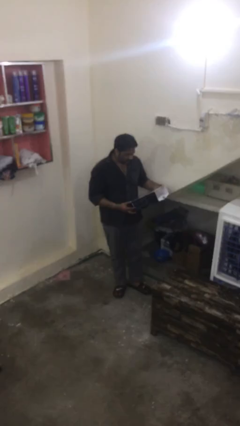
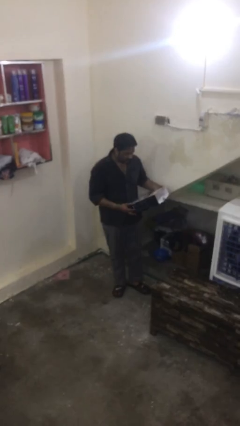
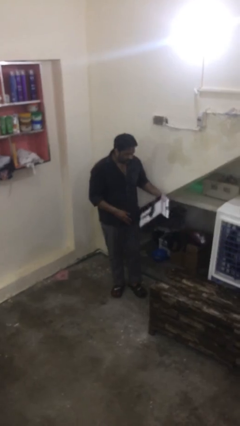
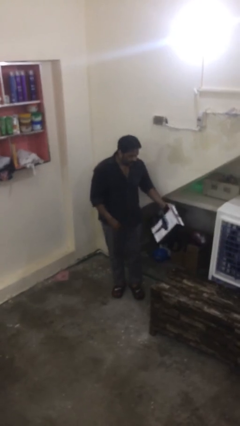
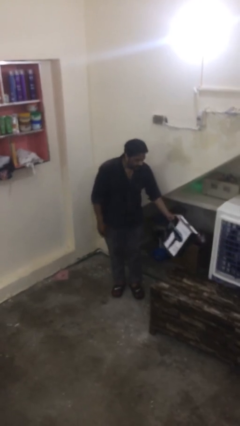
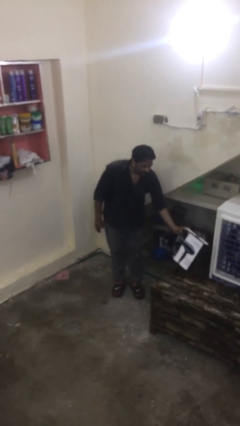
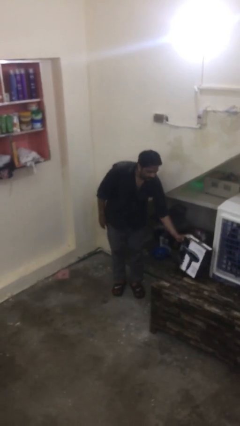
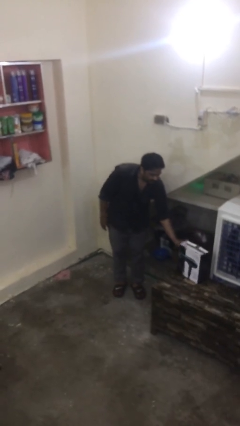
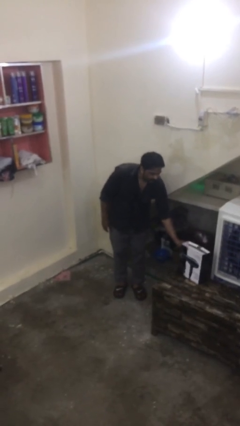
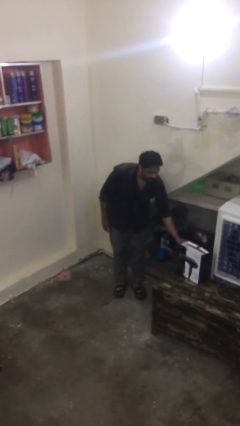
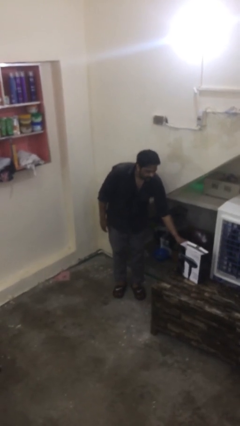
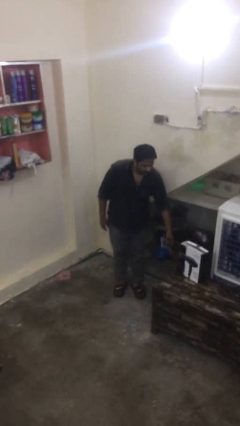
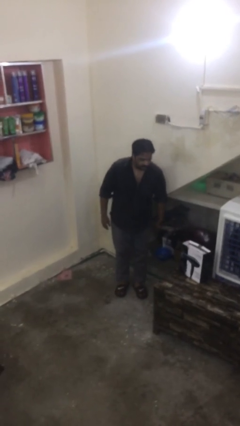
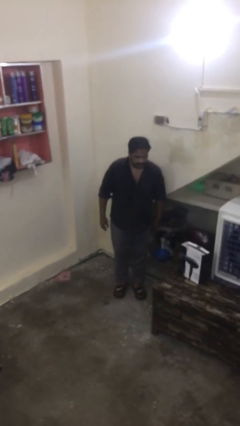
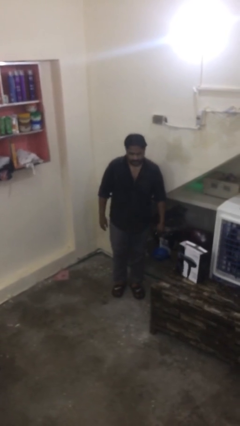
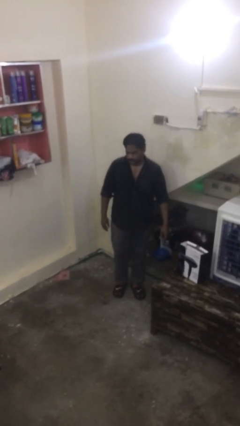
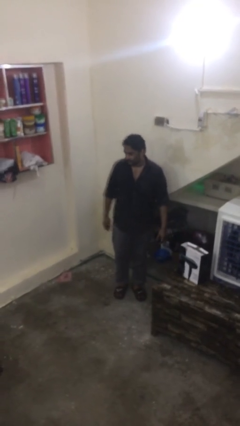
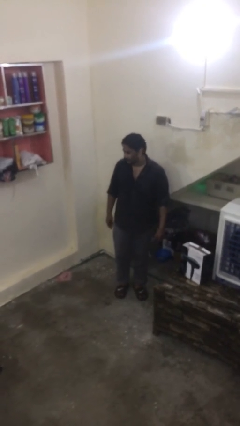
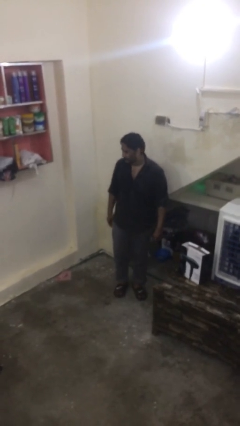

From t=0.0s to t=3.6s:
person puts down object on table

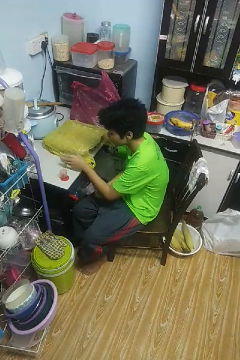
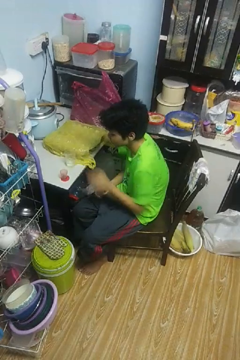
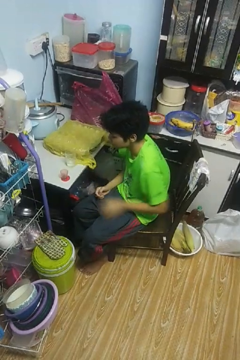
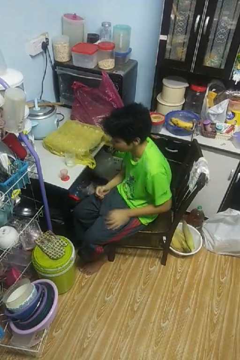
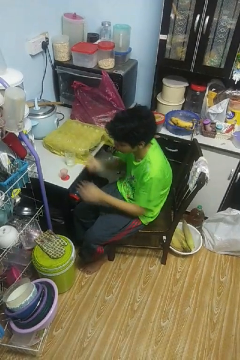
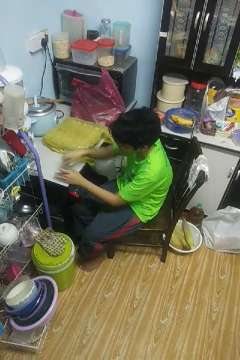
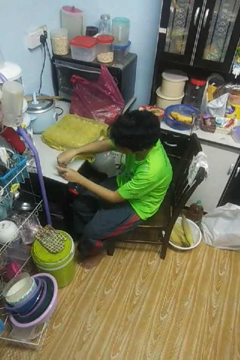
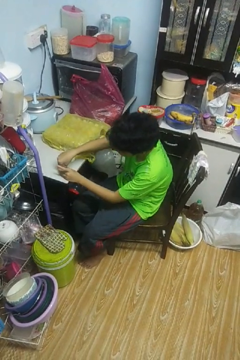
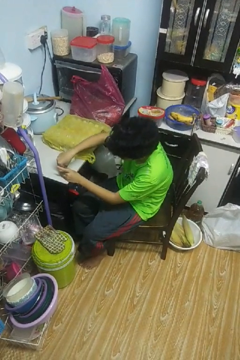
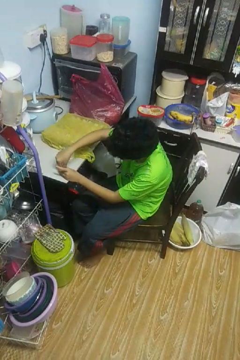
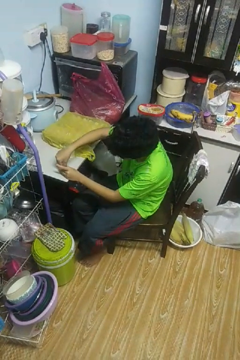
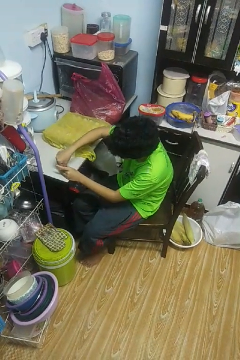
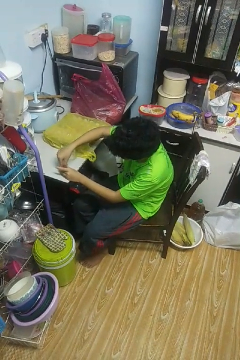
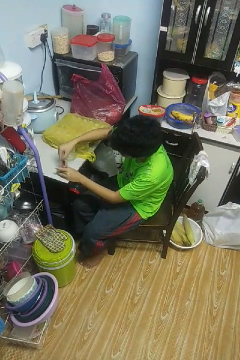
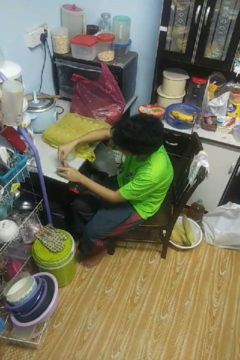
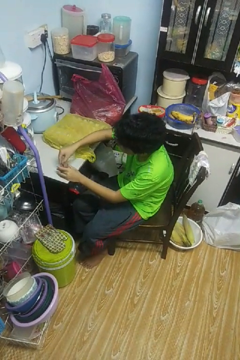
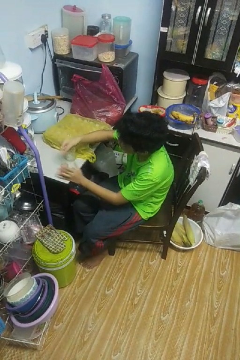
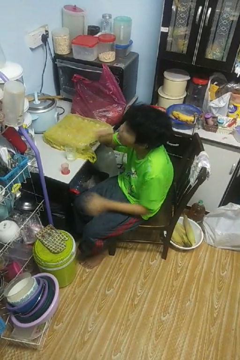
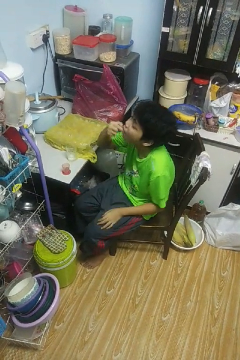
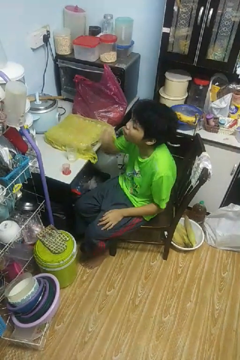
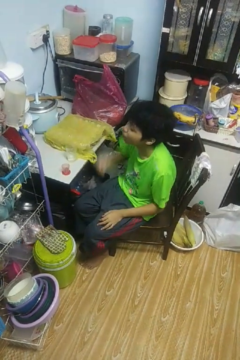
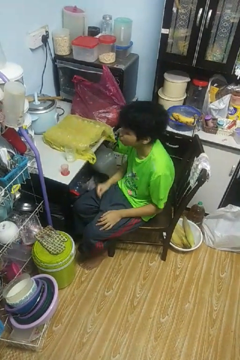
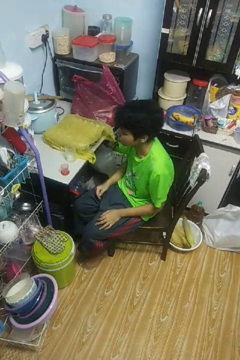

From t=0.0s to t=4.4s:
person takes medicine pills

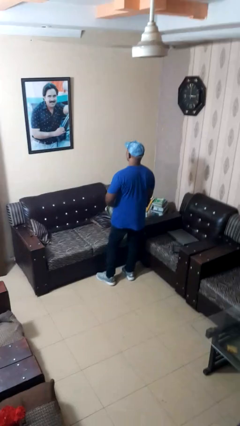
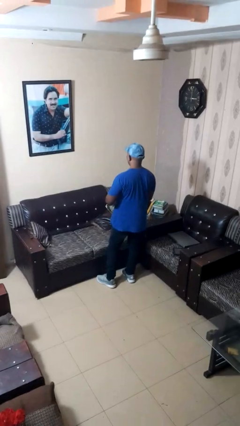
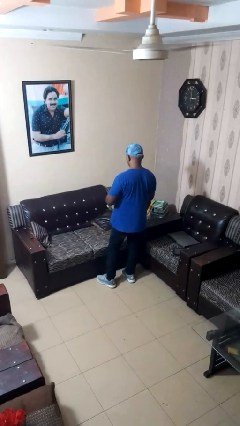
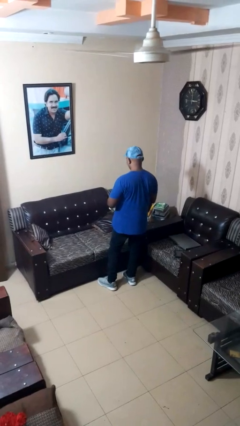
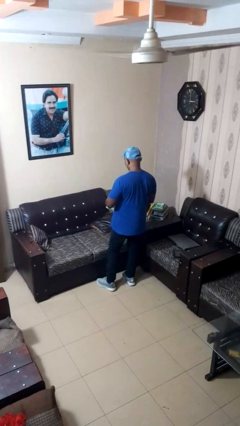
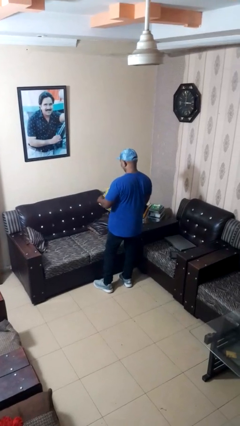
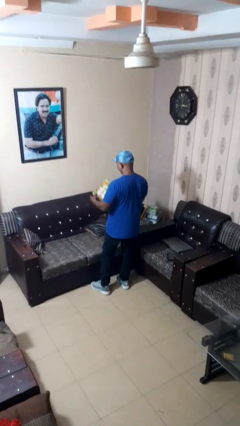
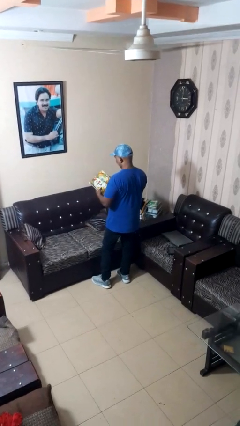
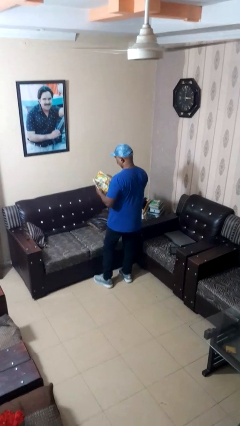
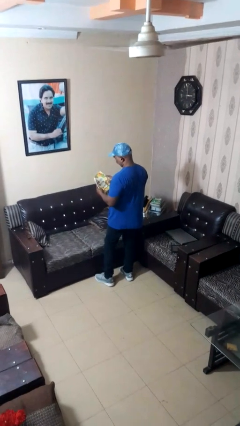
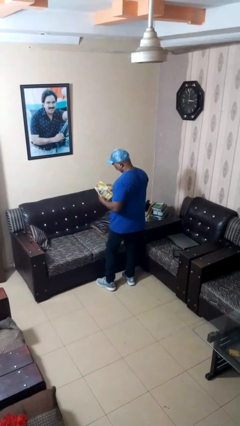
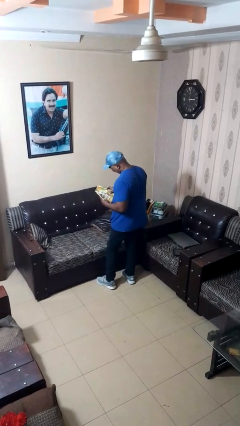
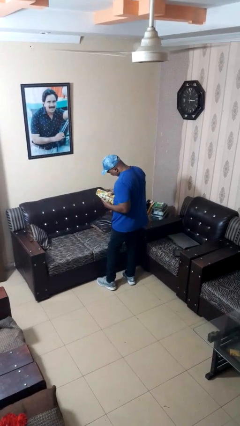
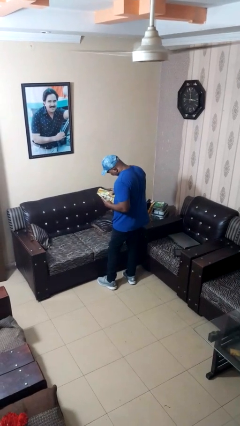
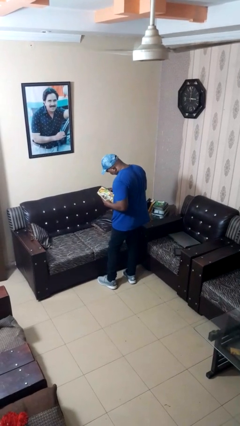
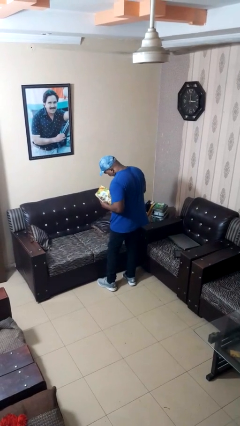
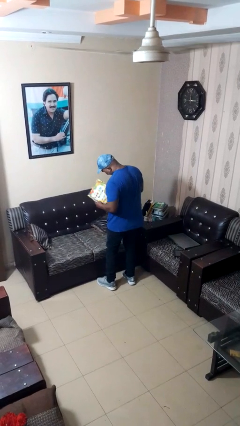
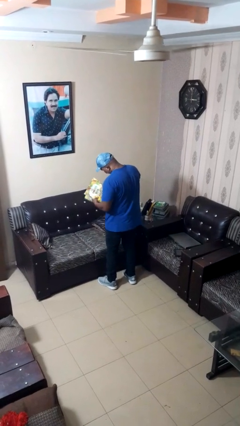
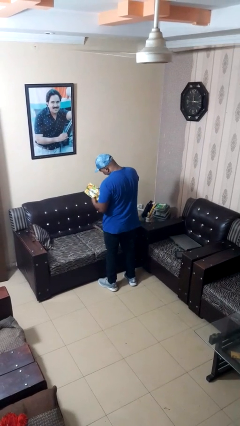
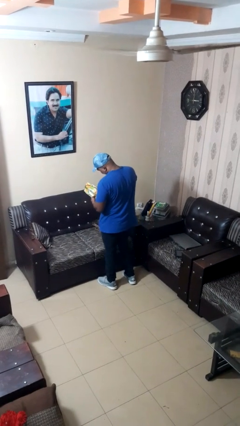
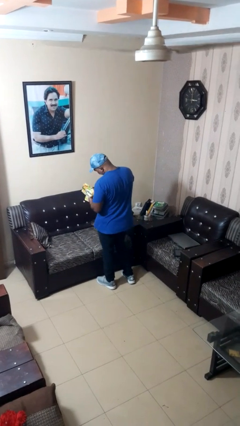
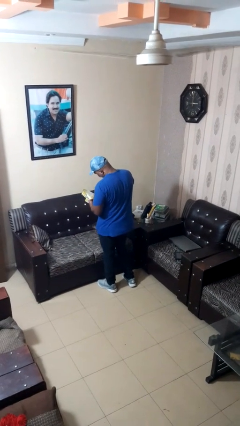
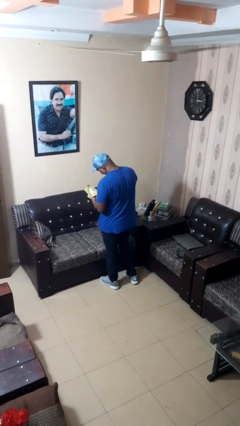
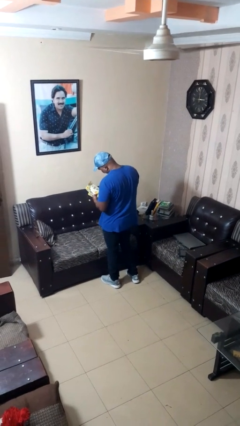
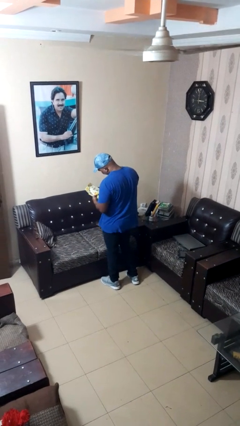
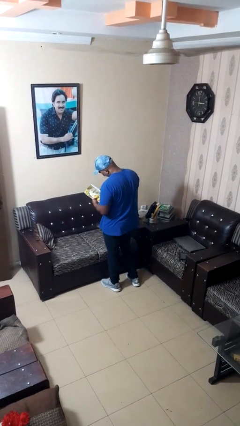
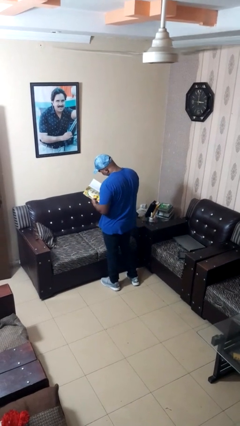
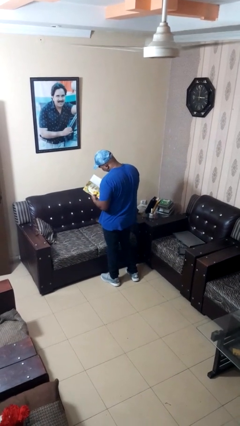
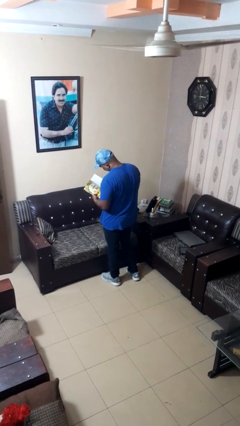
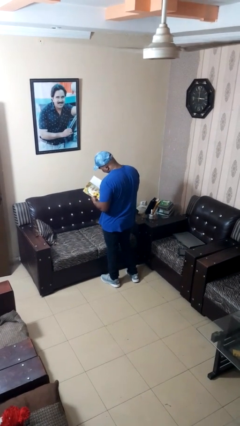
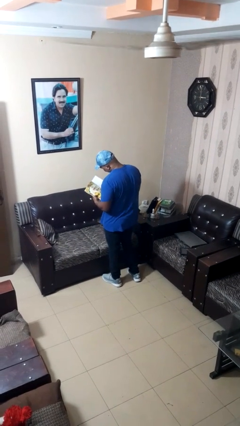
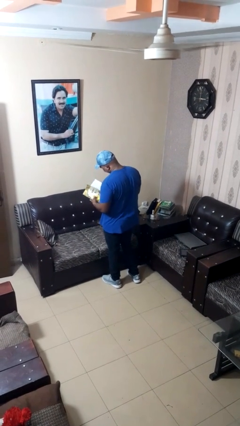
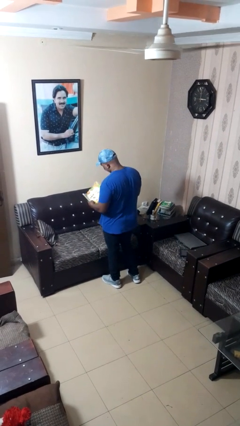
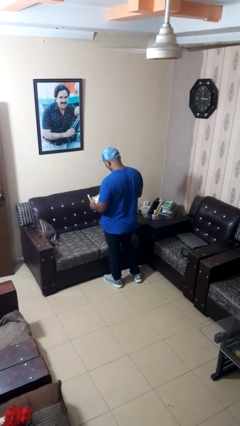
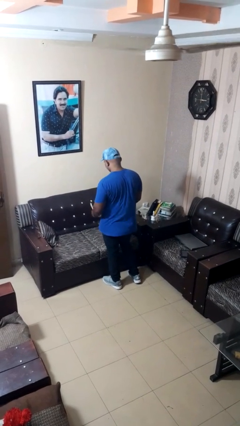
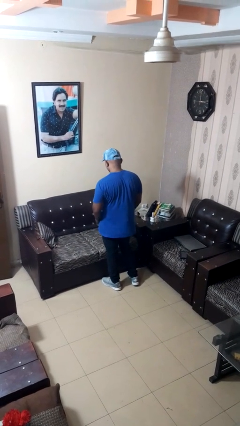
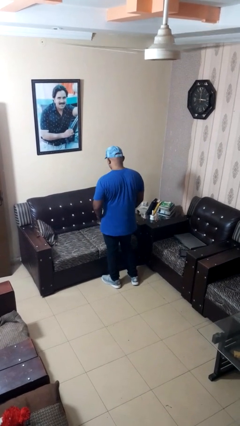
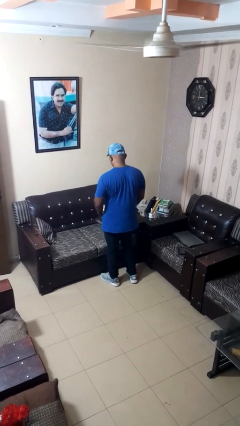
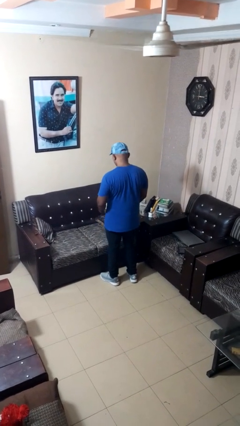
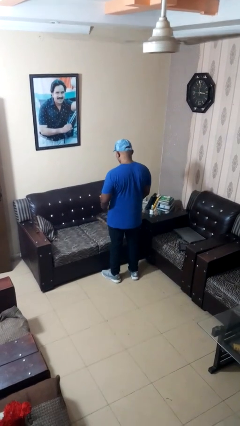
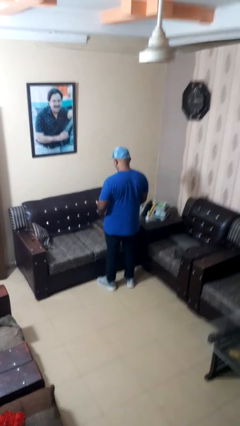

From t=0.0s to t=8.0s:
person reads magazine

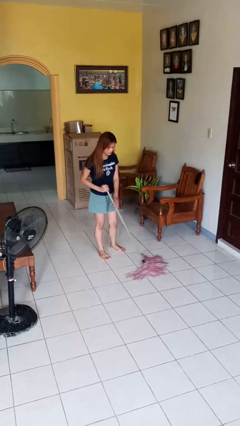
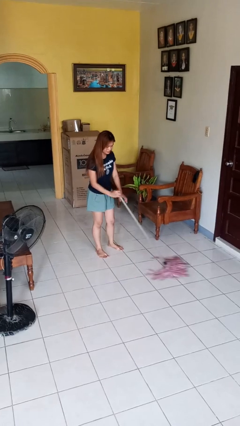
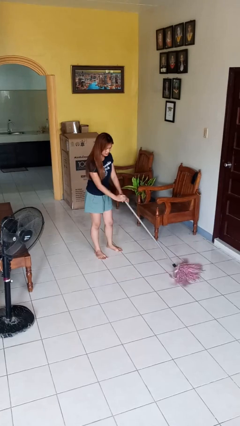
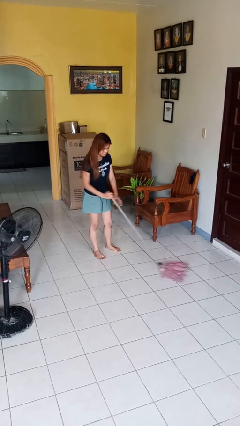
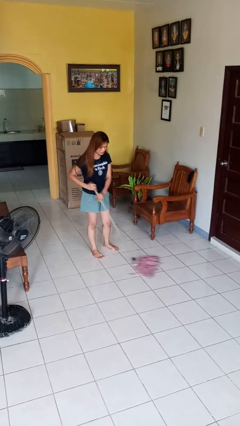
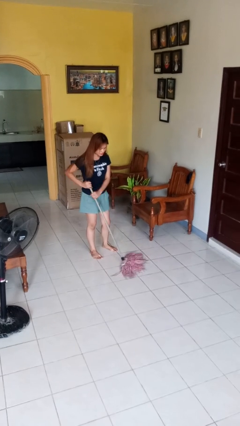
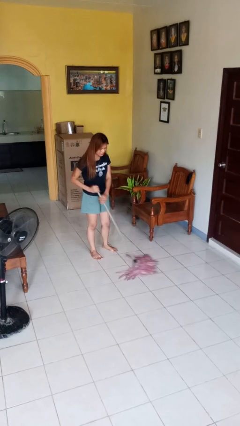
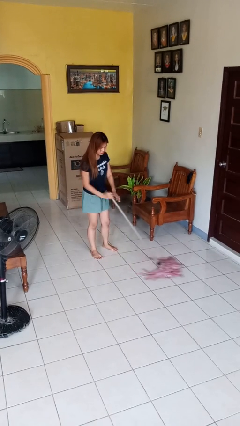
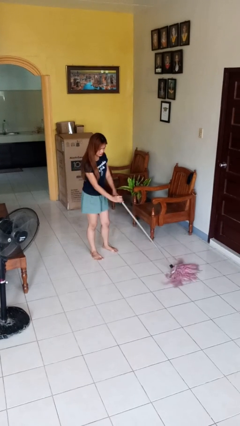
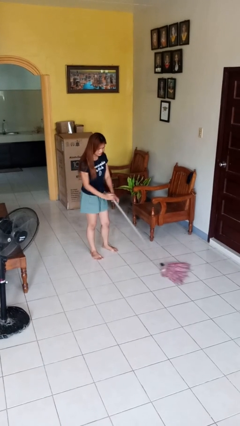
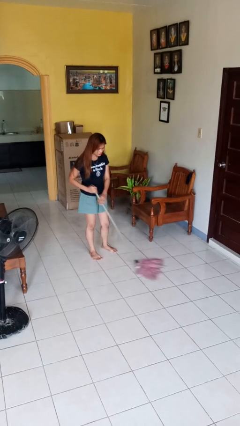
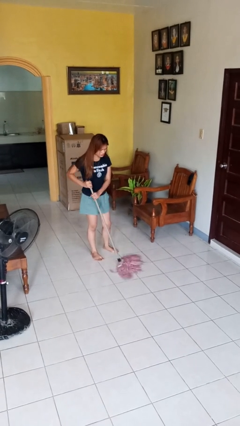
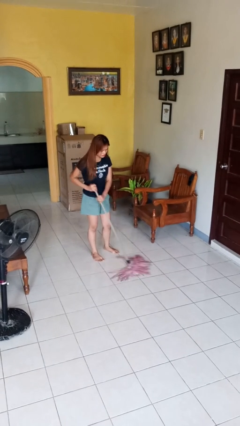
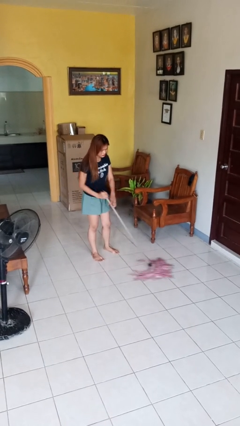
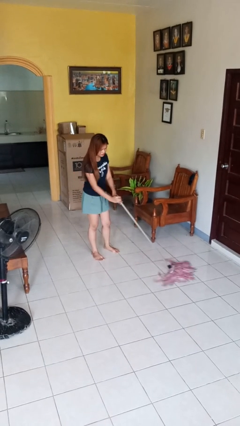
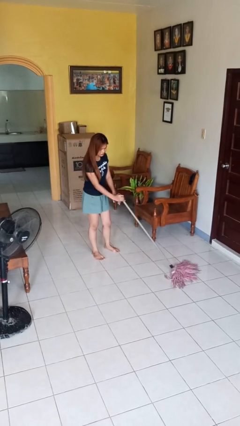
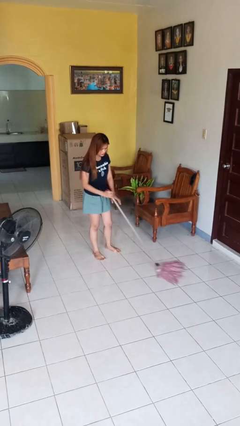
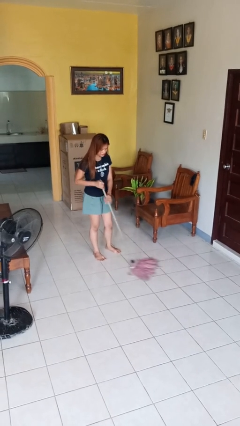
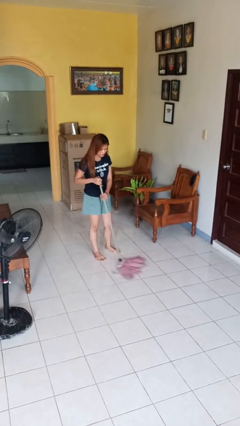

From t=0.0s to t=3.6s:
person mops
